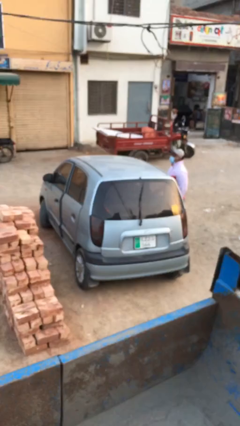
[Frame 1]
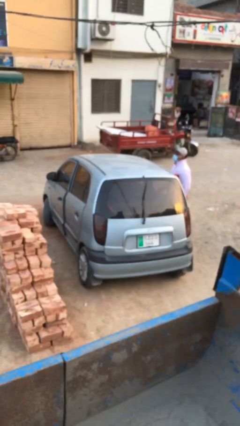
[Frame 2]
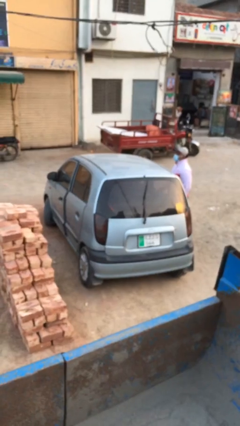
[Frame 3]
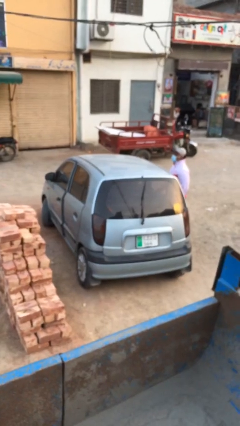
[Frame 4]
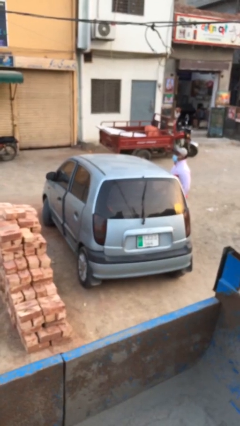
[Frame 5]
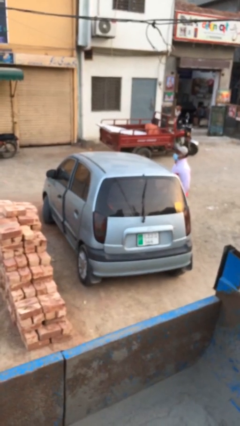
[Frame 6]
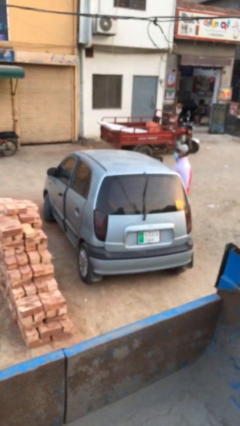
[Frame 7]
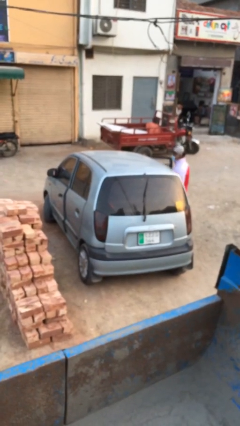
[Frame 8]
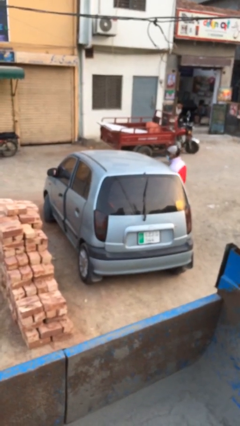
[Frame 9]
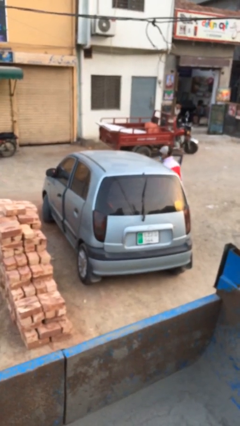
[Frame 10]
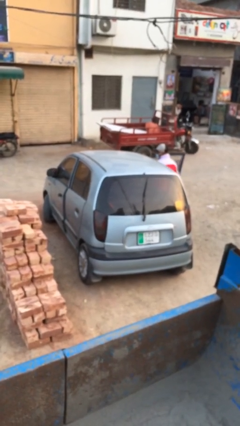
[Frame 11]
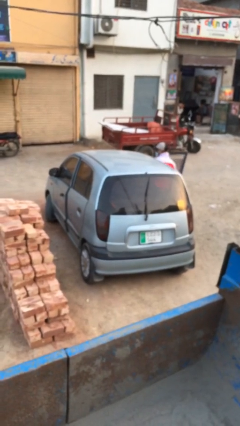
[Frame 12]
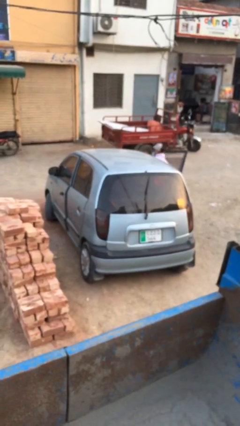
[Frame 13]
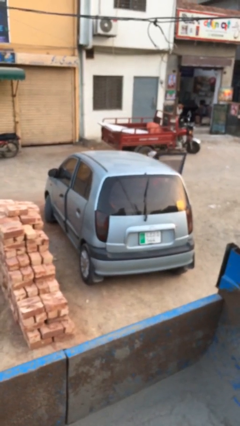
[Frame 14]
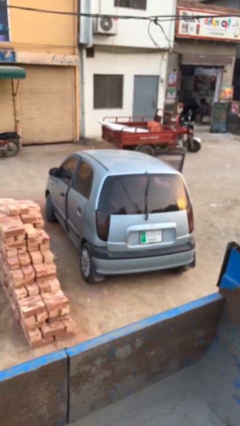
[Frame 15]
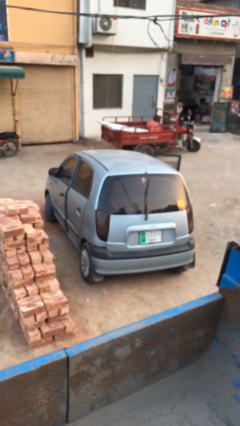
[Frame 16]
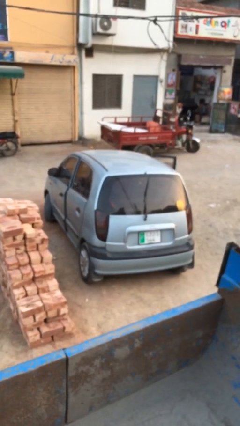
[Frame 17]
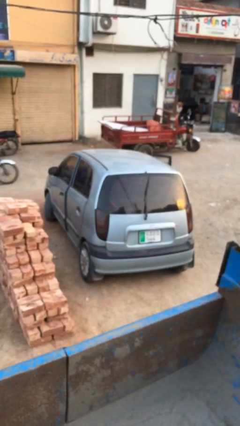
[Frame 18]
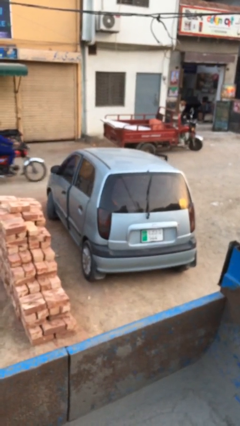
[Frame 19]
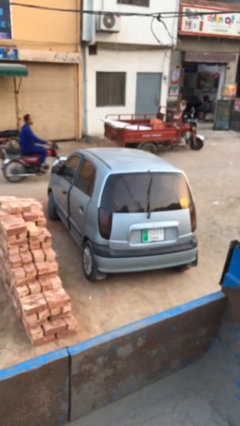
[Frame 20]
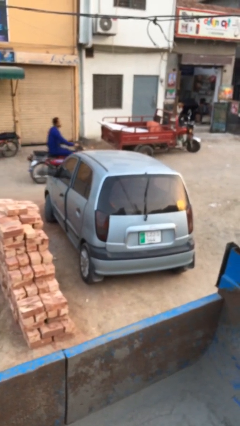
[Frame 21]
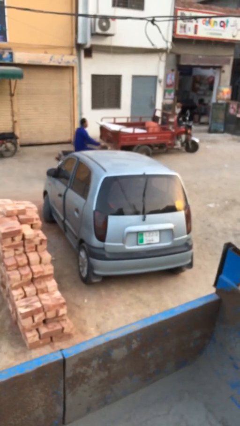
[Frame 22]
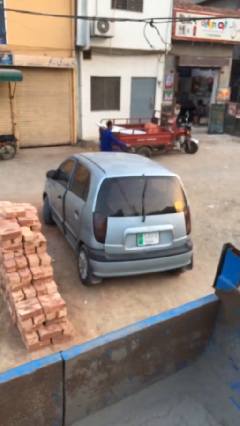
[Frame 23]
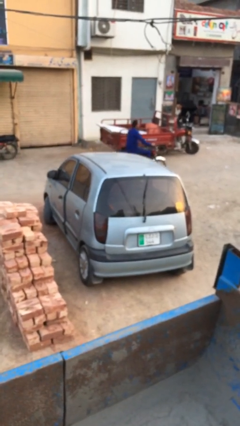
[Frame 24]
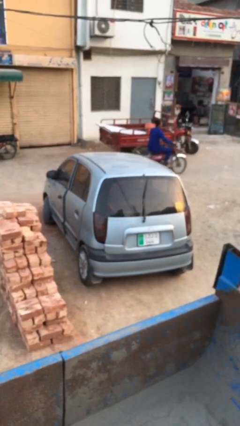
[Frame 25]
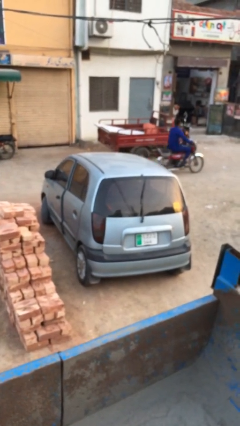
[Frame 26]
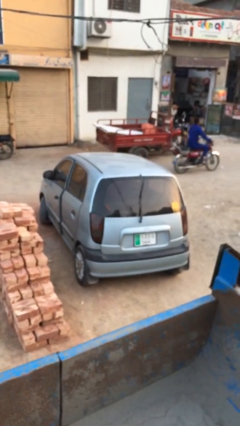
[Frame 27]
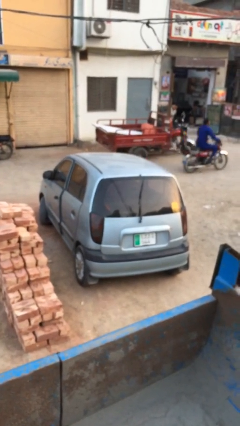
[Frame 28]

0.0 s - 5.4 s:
car picks up person

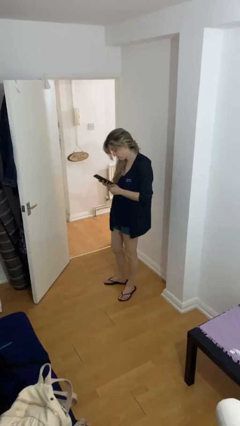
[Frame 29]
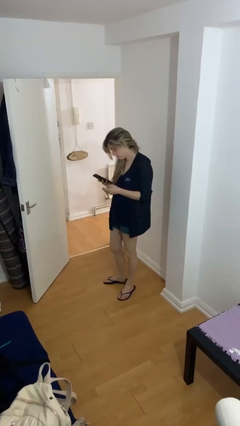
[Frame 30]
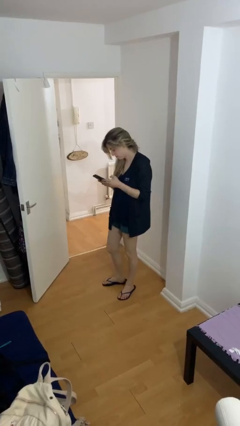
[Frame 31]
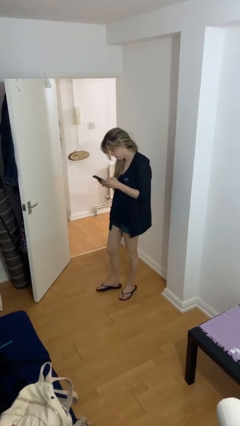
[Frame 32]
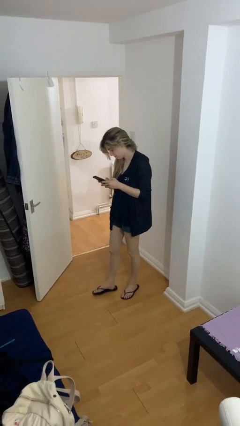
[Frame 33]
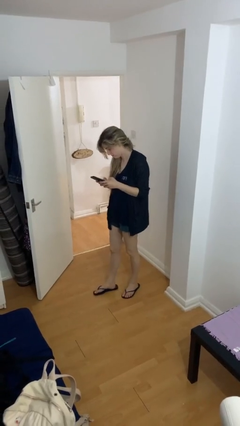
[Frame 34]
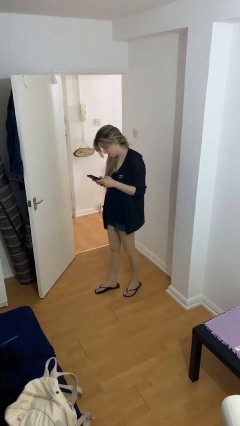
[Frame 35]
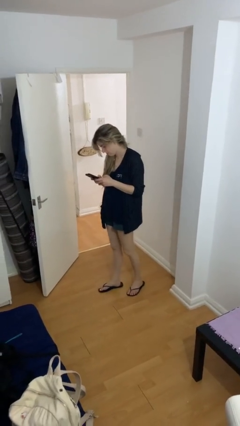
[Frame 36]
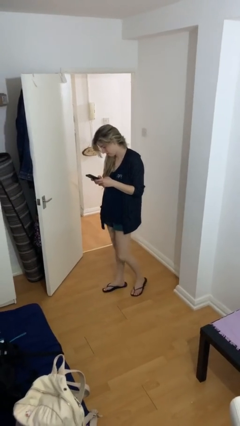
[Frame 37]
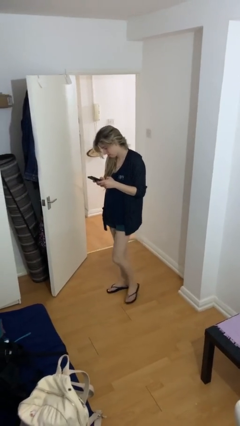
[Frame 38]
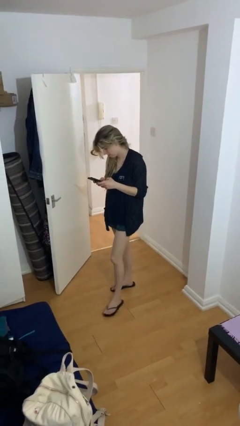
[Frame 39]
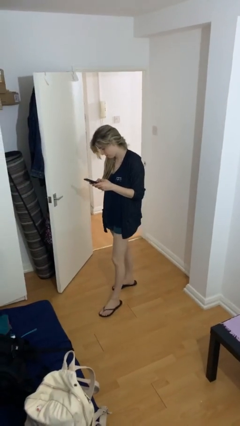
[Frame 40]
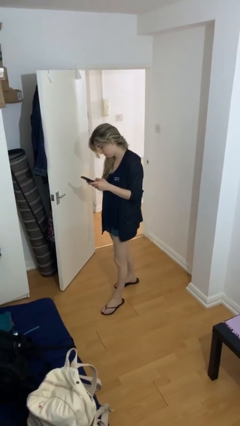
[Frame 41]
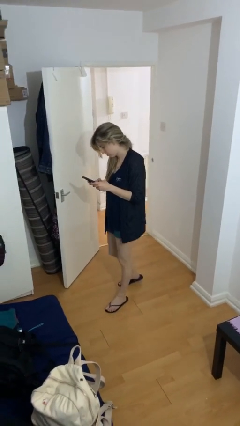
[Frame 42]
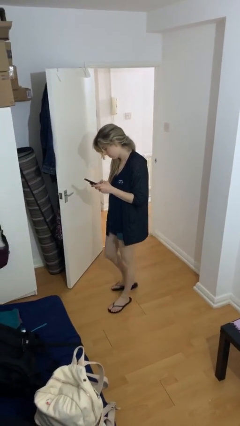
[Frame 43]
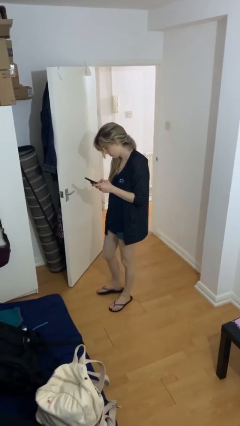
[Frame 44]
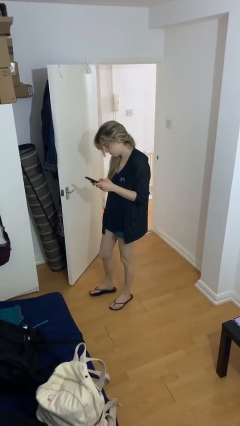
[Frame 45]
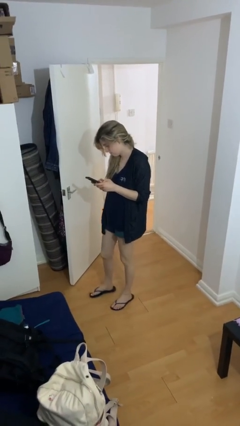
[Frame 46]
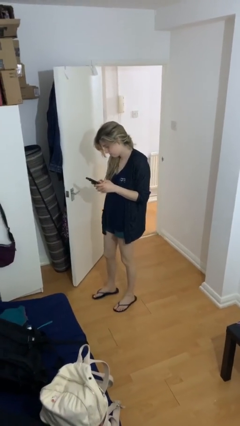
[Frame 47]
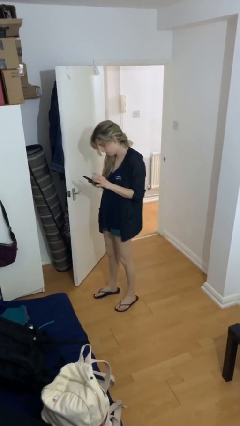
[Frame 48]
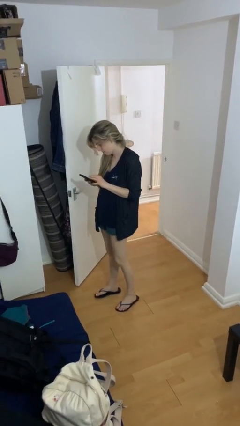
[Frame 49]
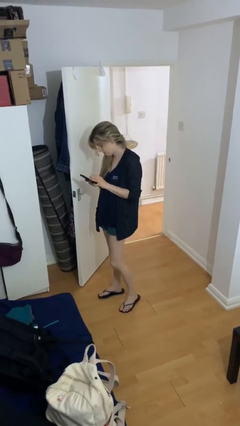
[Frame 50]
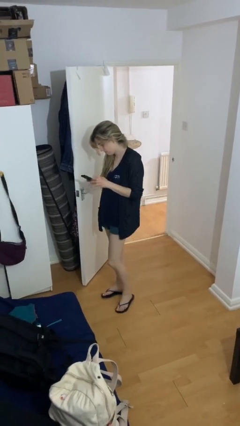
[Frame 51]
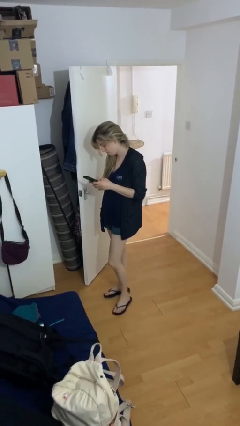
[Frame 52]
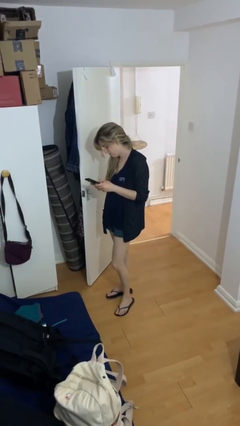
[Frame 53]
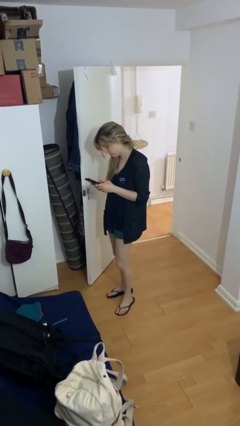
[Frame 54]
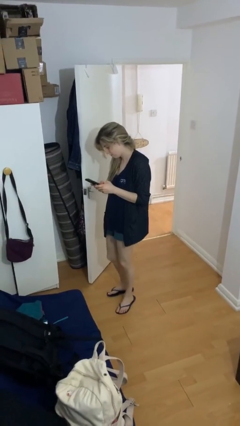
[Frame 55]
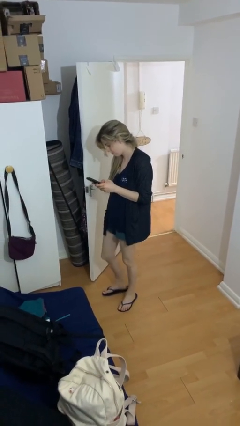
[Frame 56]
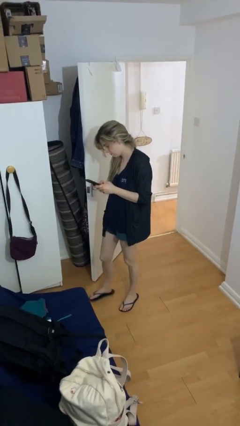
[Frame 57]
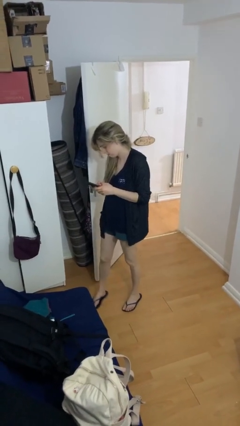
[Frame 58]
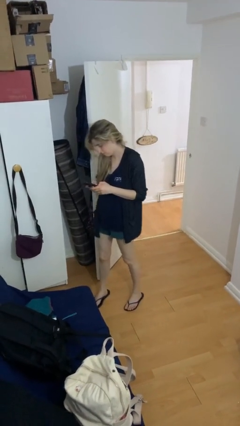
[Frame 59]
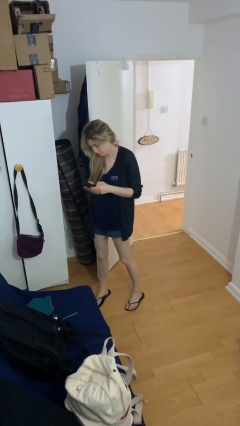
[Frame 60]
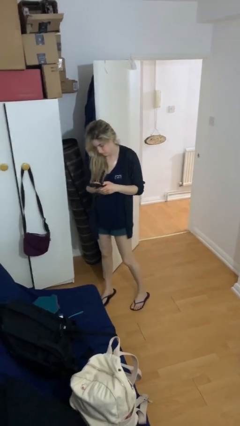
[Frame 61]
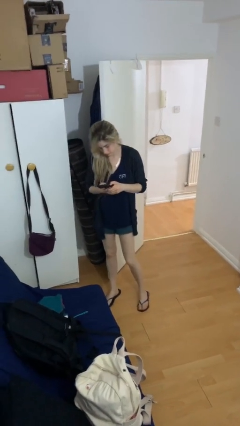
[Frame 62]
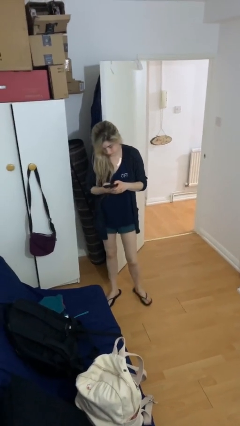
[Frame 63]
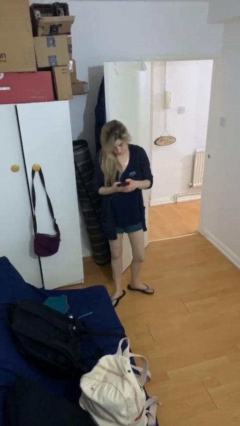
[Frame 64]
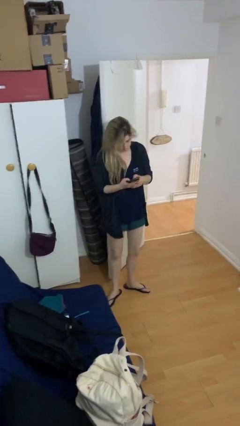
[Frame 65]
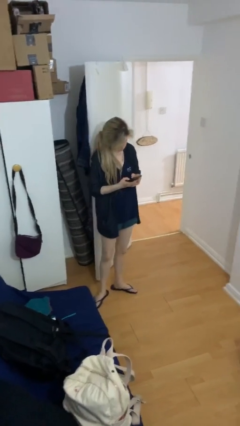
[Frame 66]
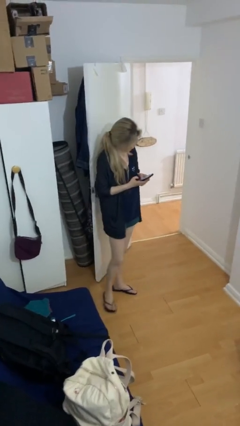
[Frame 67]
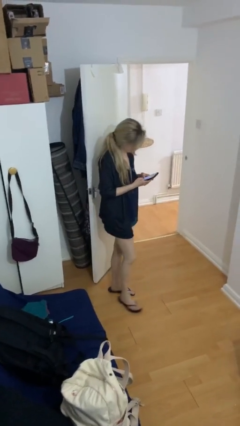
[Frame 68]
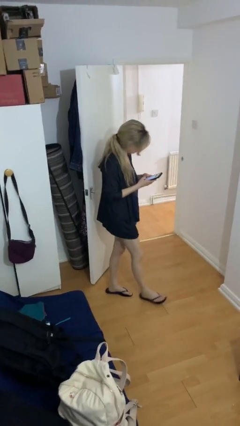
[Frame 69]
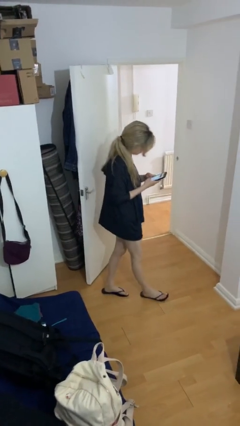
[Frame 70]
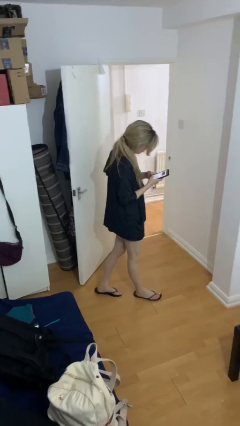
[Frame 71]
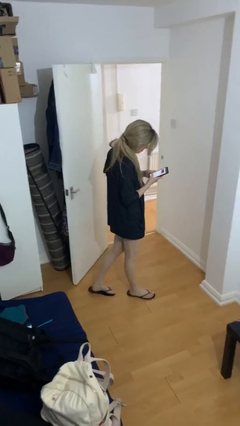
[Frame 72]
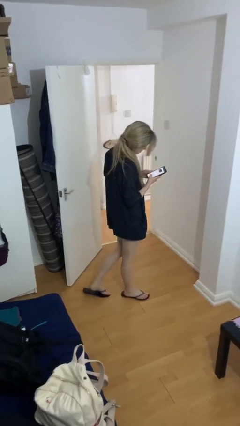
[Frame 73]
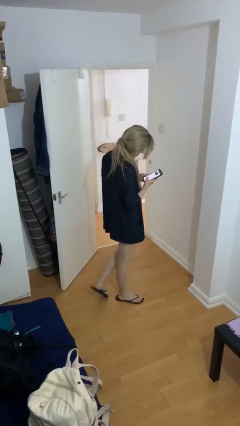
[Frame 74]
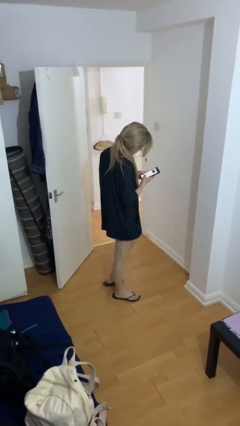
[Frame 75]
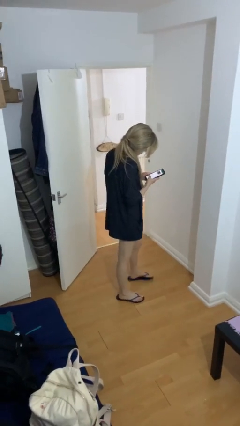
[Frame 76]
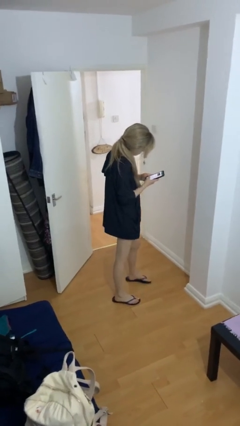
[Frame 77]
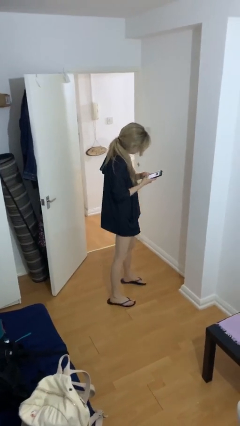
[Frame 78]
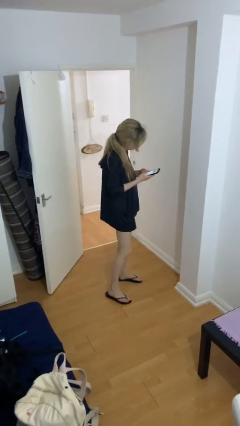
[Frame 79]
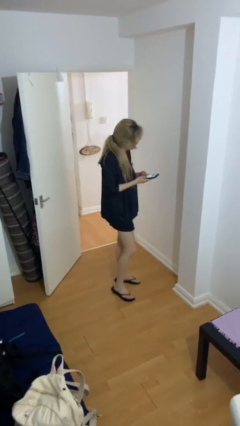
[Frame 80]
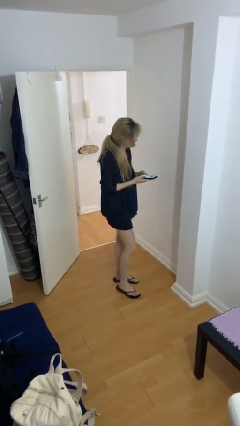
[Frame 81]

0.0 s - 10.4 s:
person texts on phone

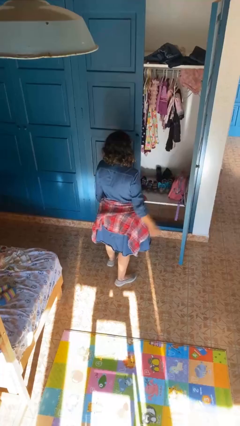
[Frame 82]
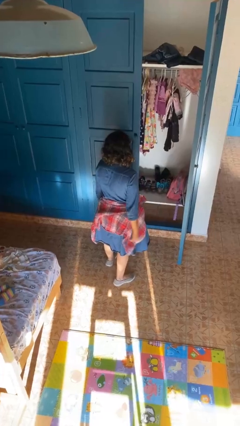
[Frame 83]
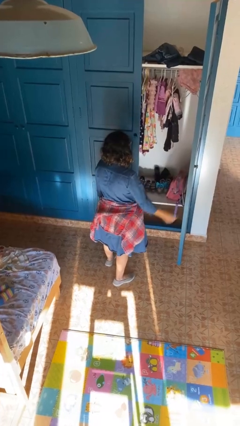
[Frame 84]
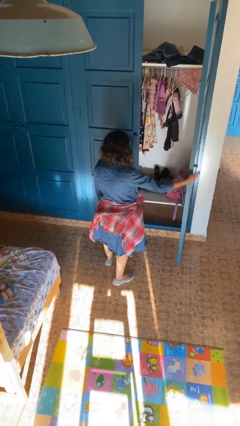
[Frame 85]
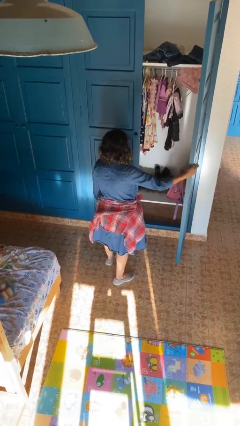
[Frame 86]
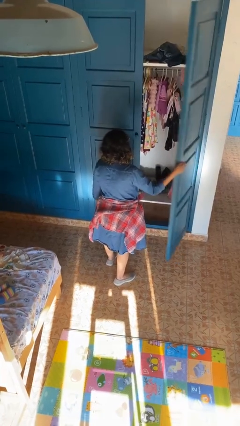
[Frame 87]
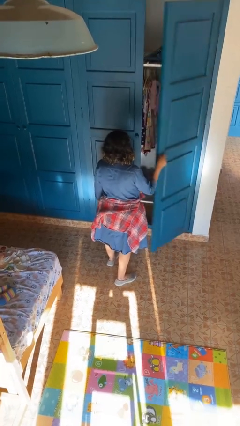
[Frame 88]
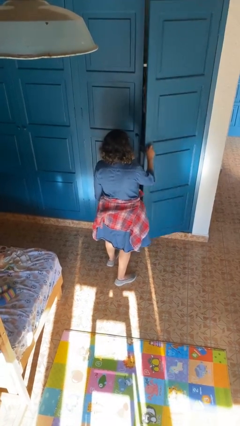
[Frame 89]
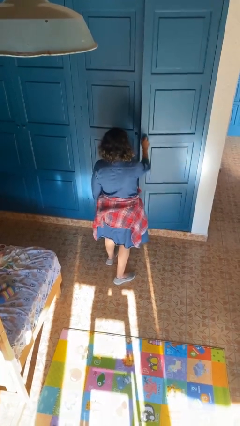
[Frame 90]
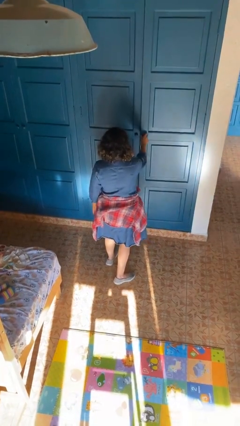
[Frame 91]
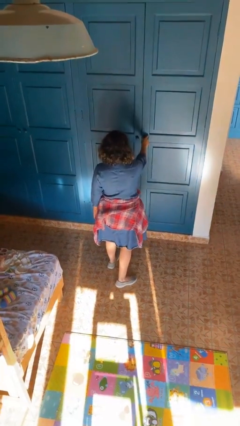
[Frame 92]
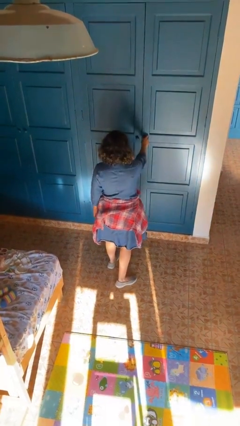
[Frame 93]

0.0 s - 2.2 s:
person closes closet door
